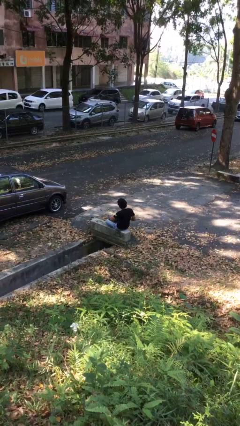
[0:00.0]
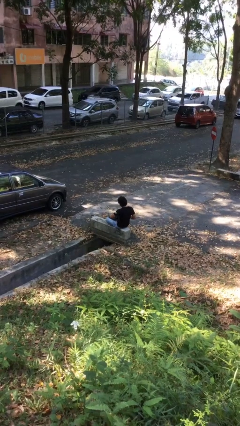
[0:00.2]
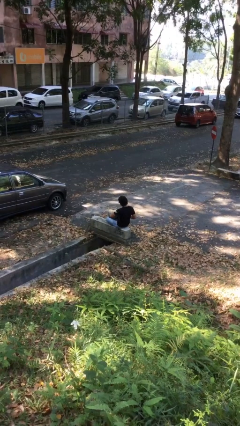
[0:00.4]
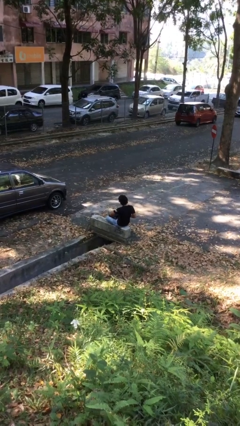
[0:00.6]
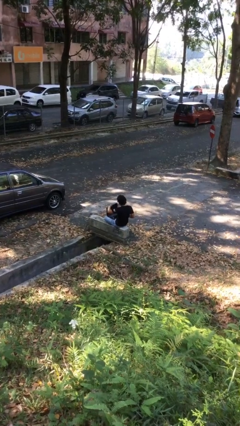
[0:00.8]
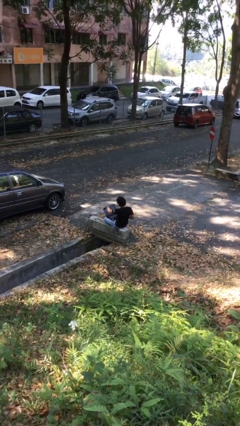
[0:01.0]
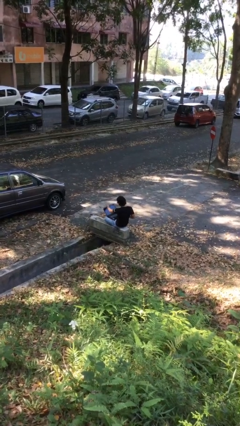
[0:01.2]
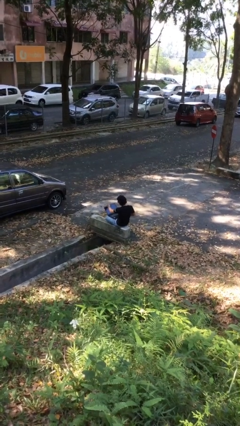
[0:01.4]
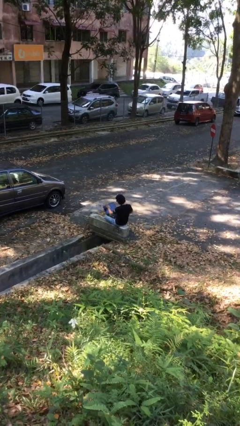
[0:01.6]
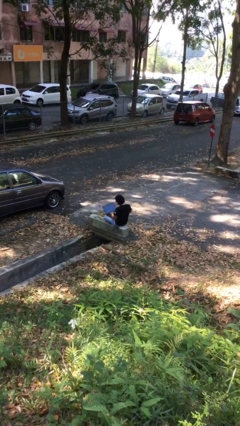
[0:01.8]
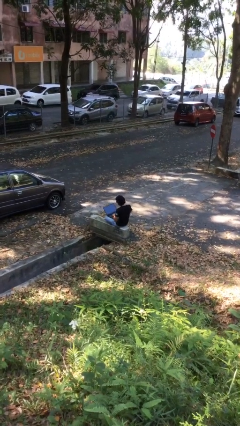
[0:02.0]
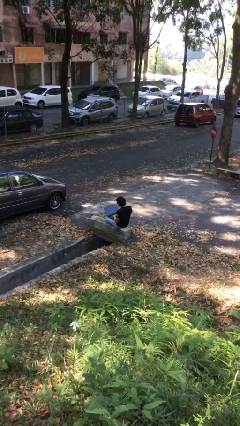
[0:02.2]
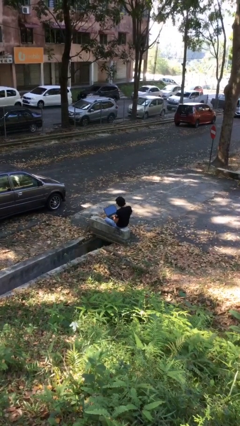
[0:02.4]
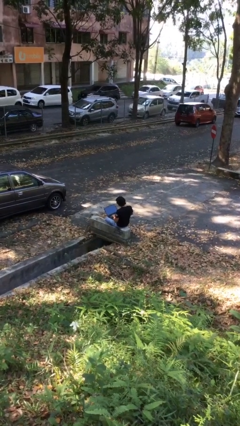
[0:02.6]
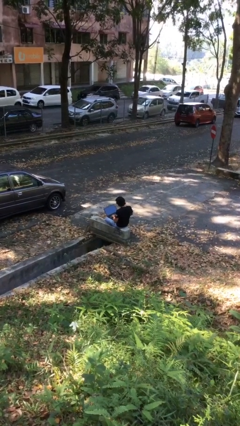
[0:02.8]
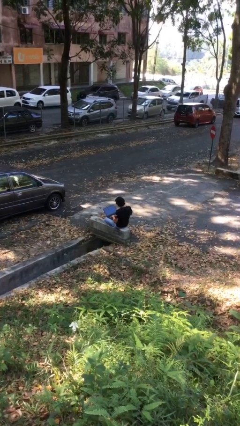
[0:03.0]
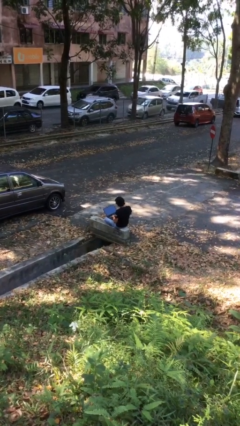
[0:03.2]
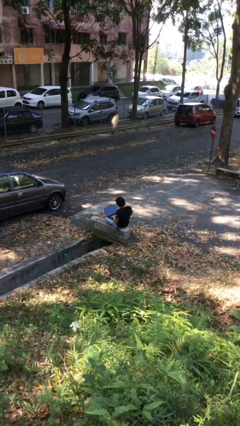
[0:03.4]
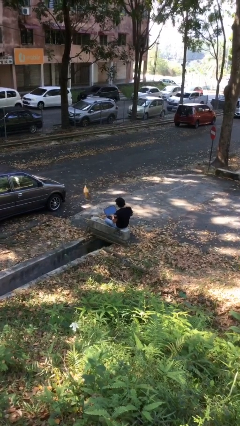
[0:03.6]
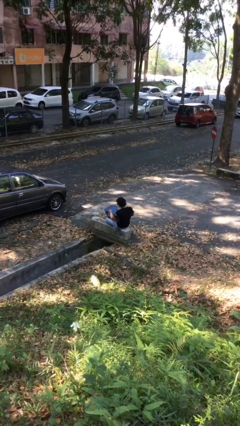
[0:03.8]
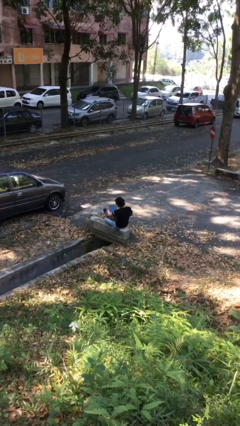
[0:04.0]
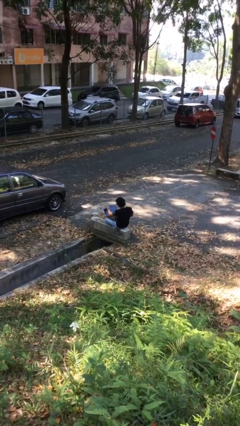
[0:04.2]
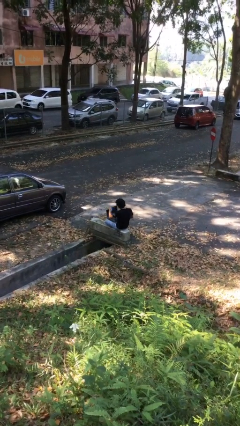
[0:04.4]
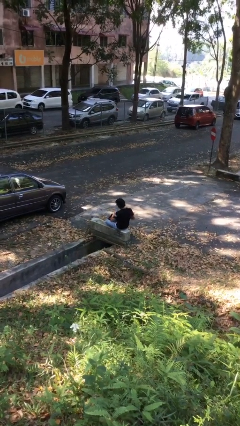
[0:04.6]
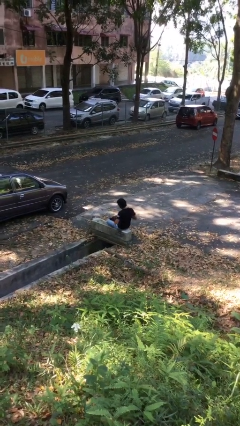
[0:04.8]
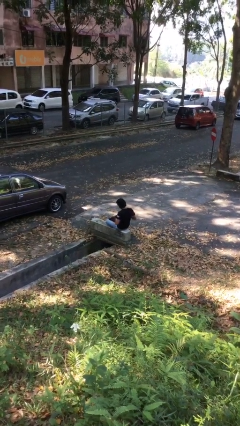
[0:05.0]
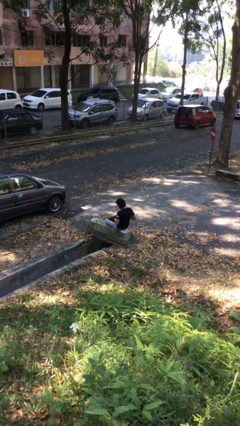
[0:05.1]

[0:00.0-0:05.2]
person interacts with laptop

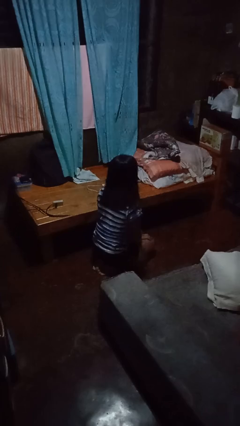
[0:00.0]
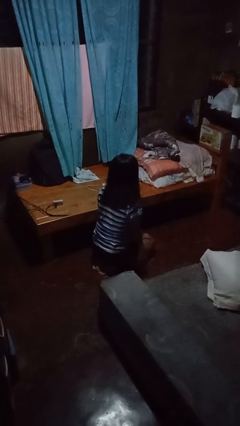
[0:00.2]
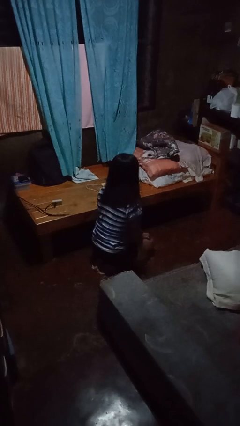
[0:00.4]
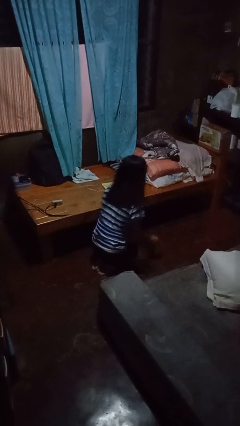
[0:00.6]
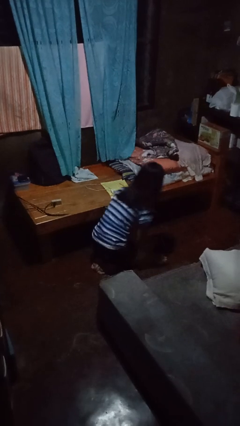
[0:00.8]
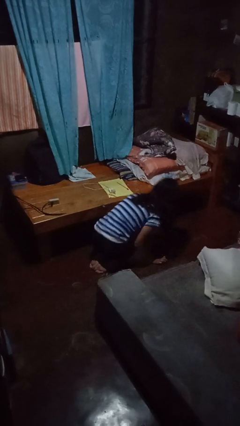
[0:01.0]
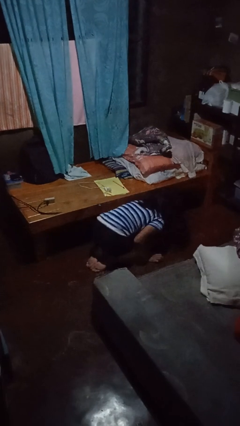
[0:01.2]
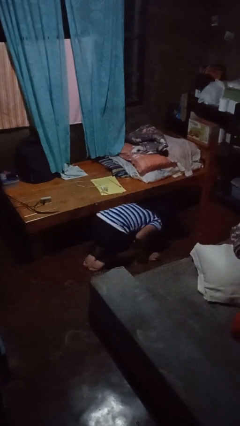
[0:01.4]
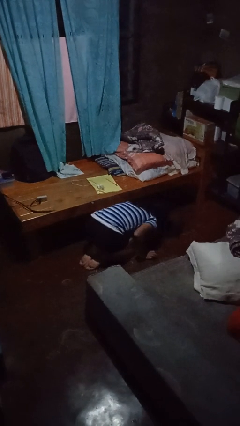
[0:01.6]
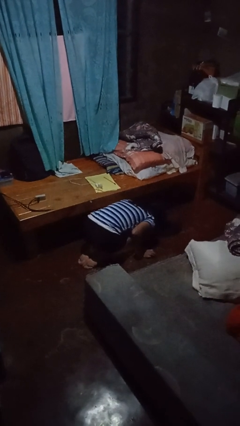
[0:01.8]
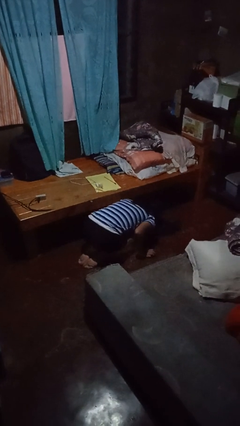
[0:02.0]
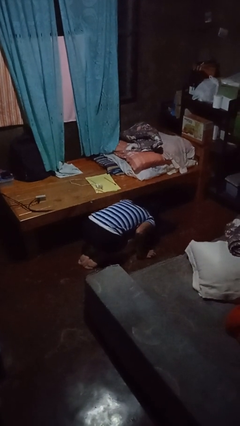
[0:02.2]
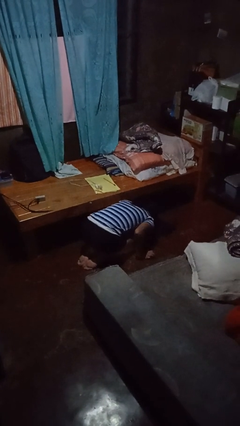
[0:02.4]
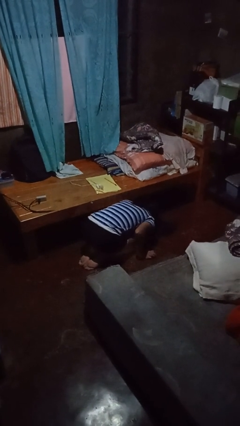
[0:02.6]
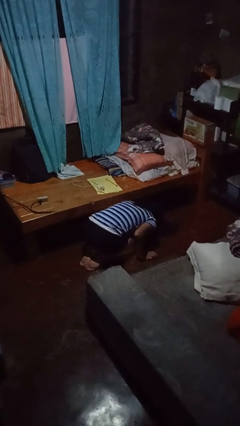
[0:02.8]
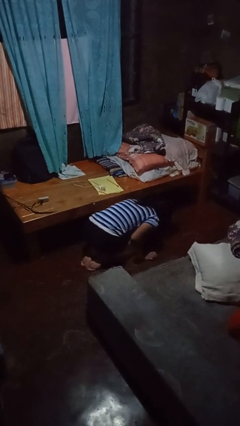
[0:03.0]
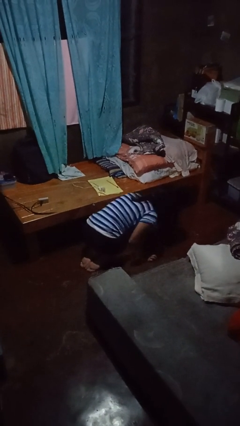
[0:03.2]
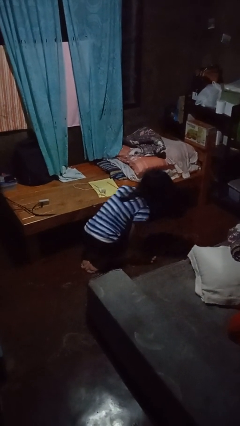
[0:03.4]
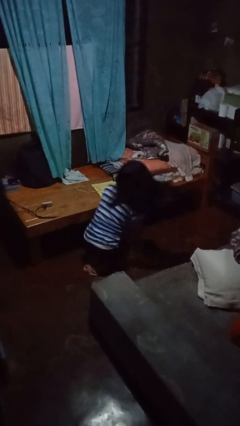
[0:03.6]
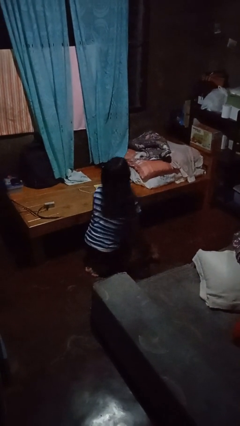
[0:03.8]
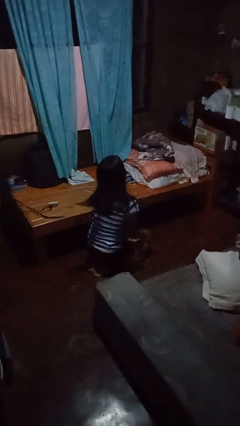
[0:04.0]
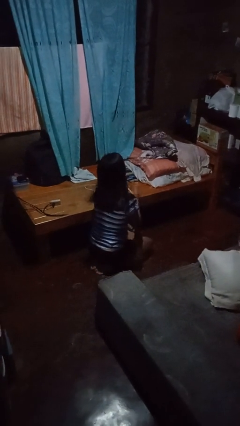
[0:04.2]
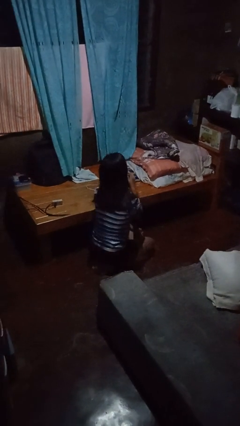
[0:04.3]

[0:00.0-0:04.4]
person searches under bed

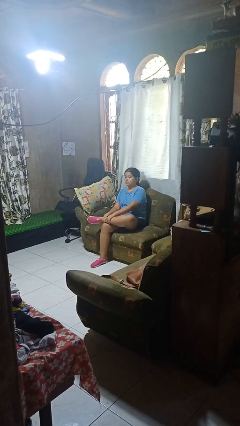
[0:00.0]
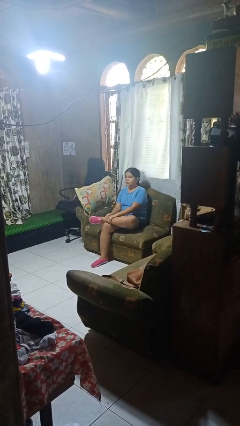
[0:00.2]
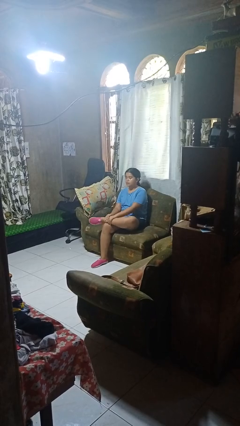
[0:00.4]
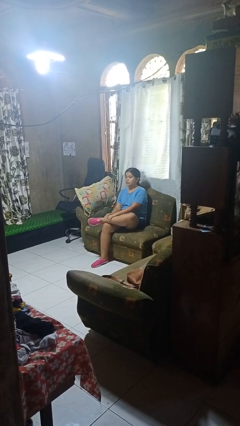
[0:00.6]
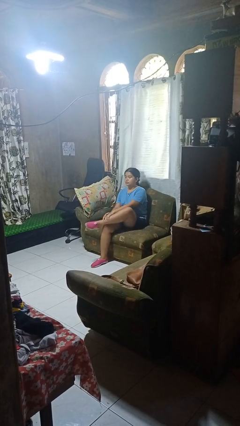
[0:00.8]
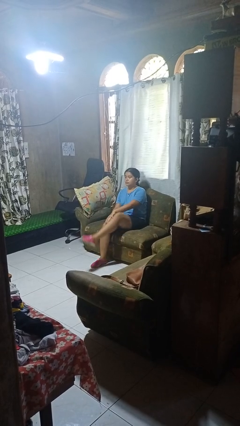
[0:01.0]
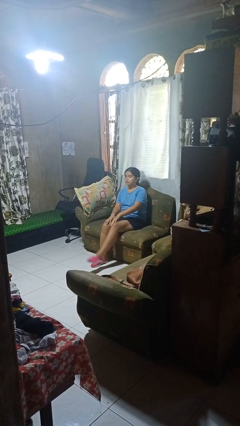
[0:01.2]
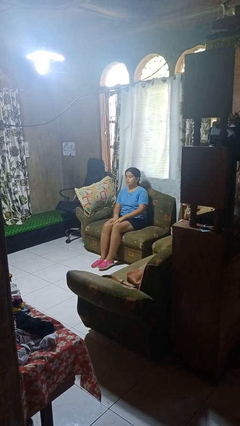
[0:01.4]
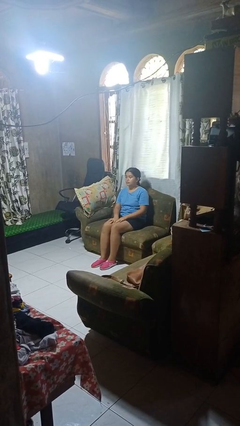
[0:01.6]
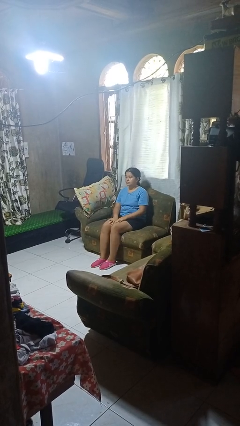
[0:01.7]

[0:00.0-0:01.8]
person crosses legs

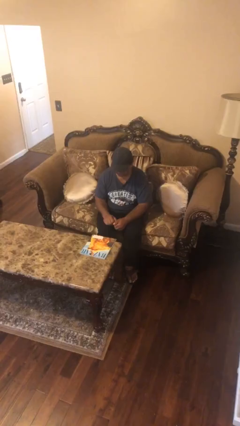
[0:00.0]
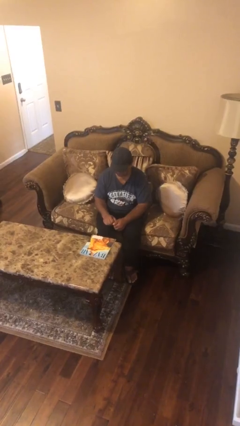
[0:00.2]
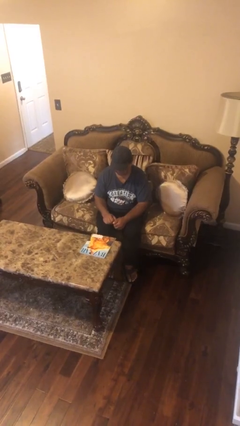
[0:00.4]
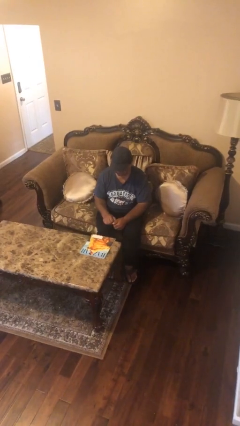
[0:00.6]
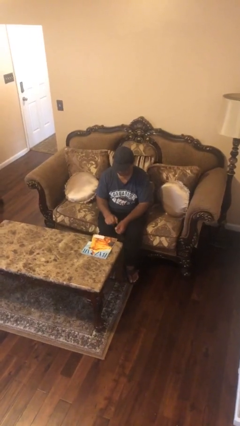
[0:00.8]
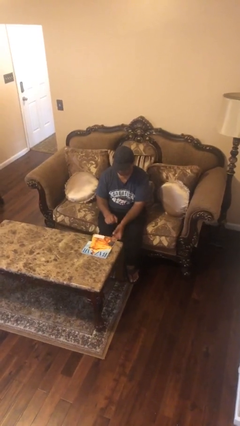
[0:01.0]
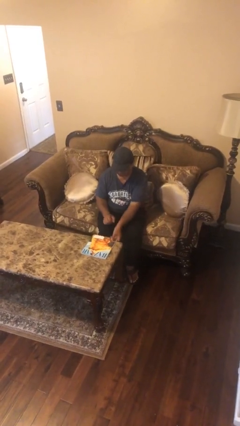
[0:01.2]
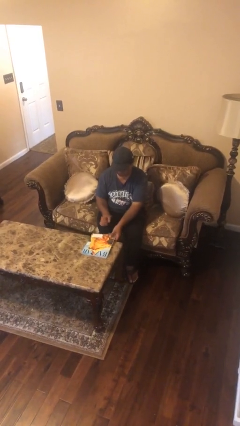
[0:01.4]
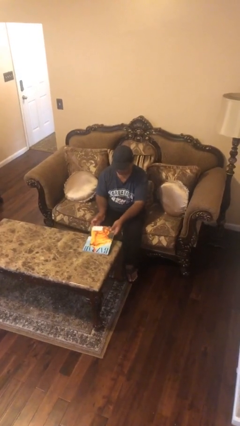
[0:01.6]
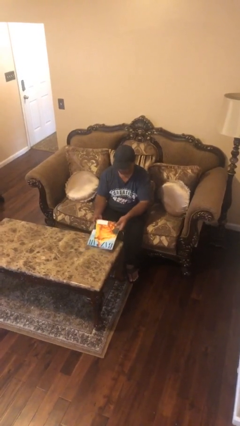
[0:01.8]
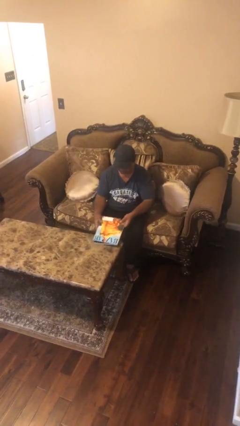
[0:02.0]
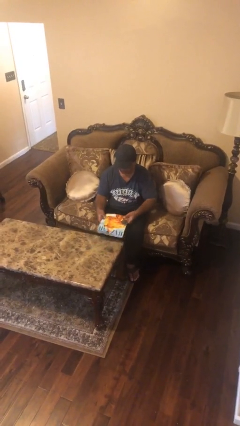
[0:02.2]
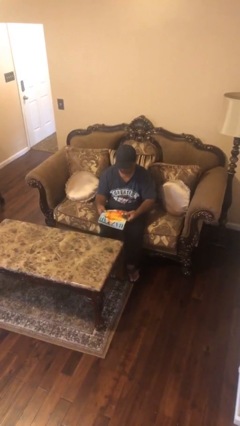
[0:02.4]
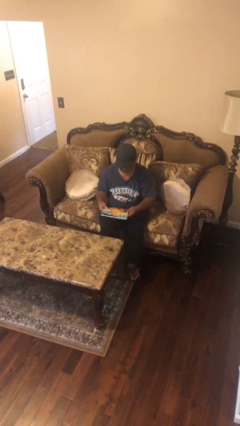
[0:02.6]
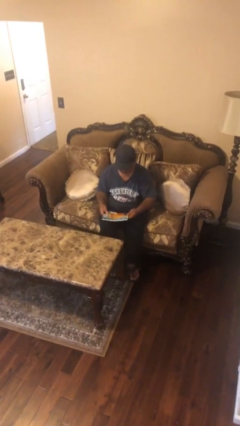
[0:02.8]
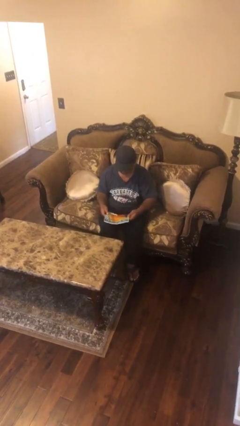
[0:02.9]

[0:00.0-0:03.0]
person picks up object from table

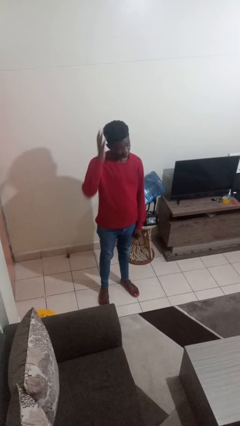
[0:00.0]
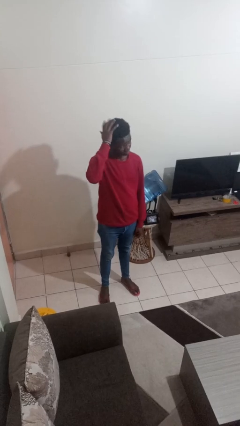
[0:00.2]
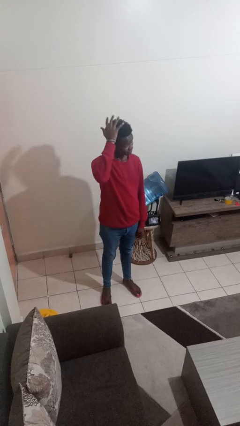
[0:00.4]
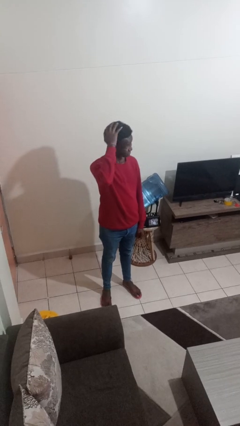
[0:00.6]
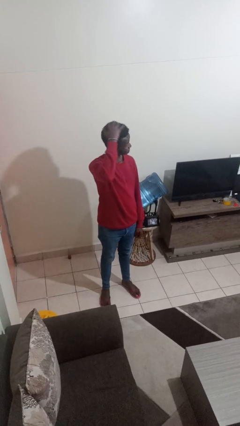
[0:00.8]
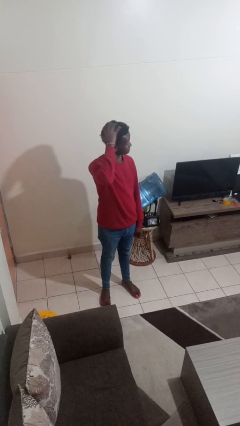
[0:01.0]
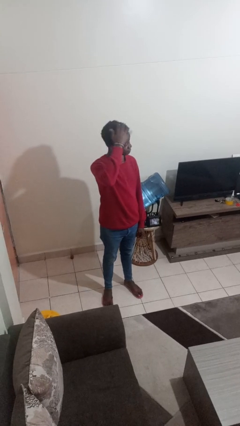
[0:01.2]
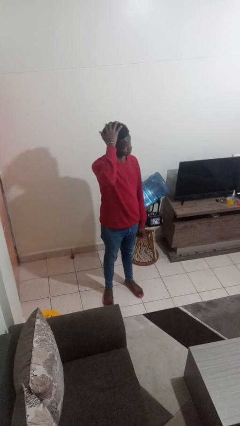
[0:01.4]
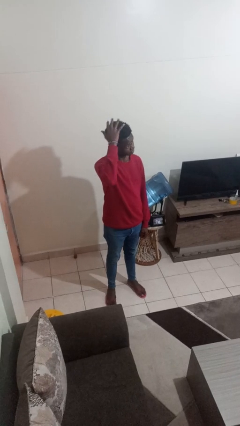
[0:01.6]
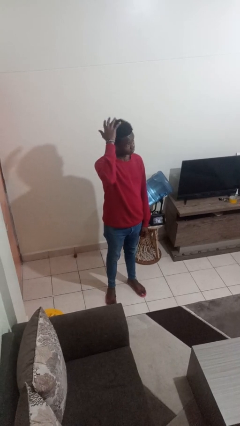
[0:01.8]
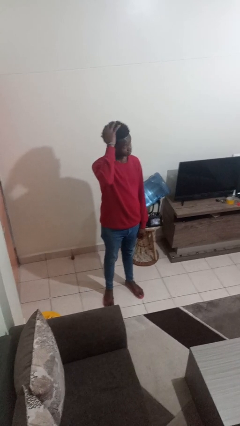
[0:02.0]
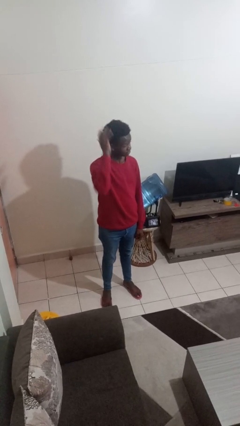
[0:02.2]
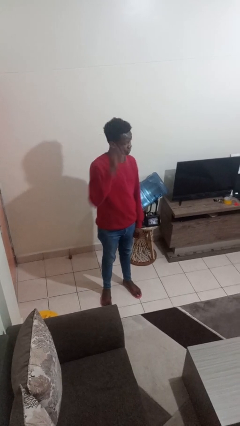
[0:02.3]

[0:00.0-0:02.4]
person pats head

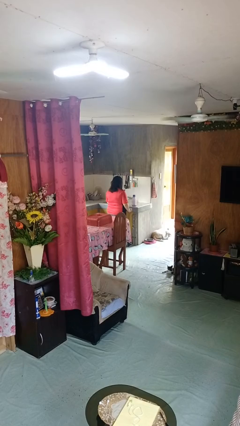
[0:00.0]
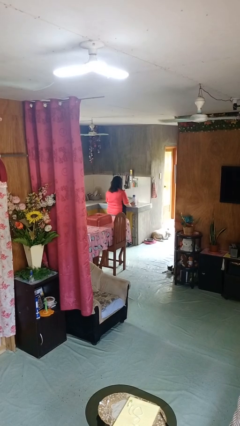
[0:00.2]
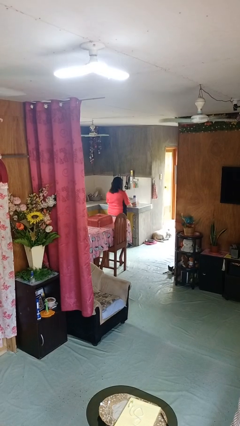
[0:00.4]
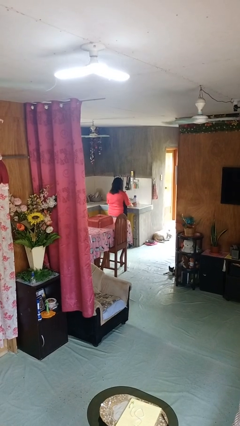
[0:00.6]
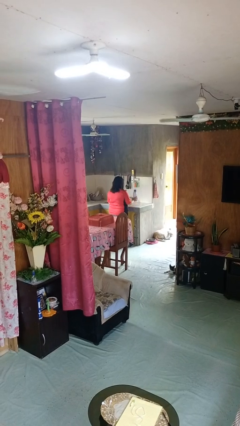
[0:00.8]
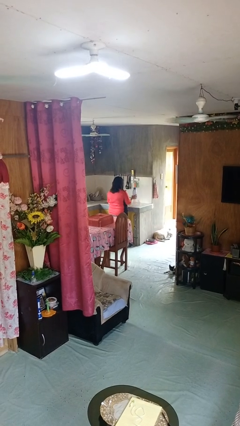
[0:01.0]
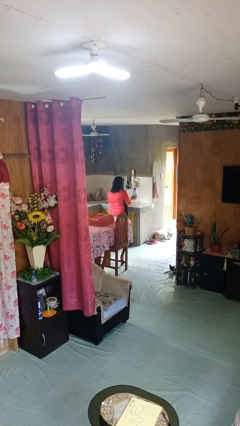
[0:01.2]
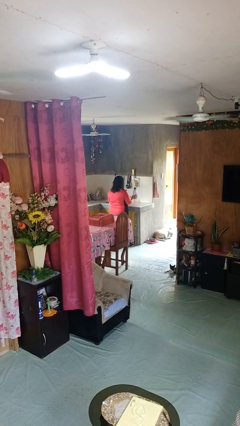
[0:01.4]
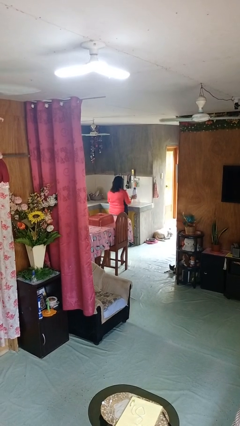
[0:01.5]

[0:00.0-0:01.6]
person picks up object from countertop
